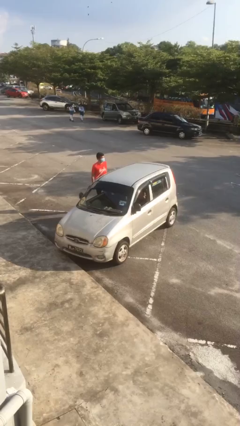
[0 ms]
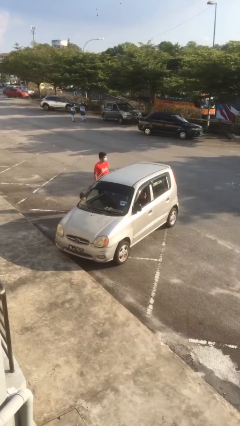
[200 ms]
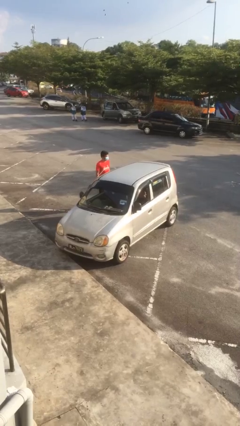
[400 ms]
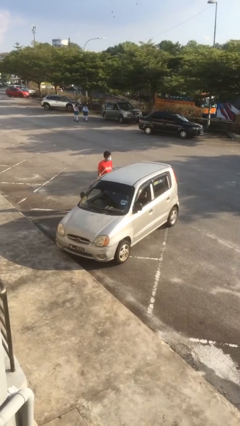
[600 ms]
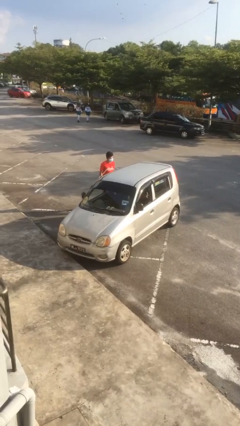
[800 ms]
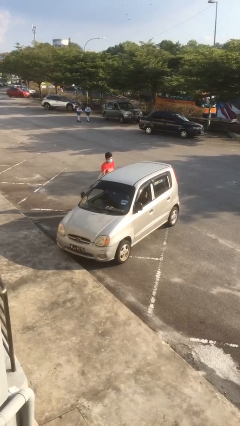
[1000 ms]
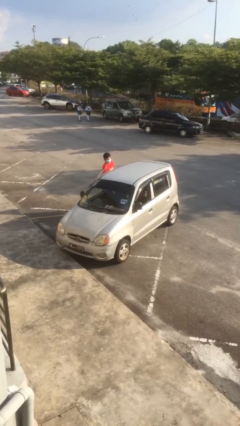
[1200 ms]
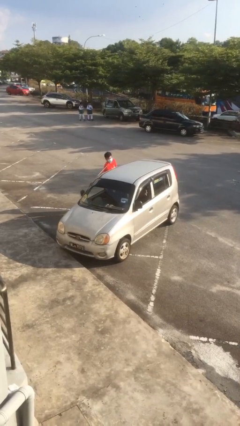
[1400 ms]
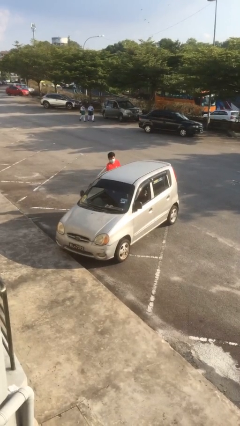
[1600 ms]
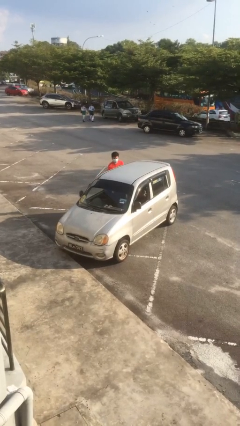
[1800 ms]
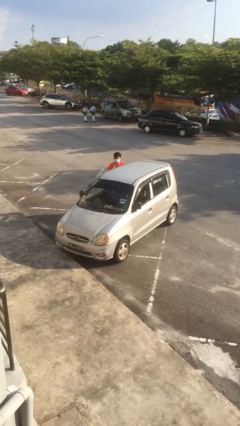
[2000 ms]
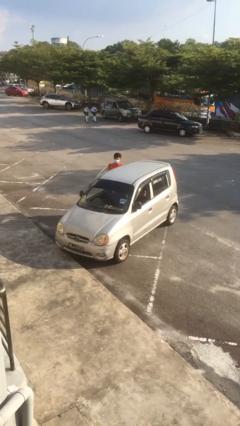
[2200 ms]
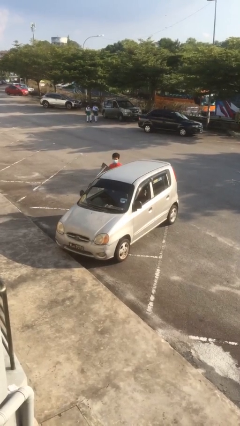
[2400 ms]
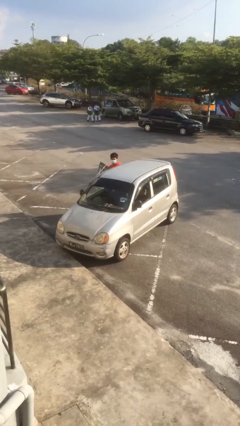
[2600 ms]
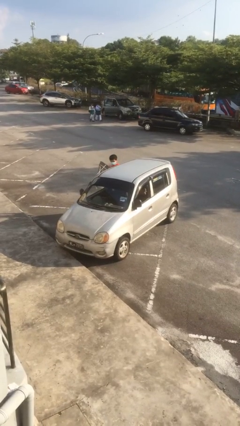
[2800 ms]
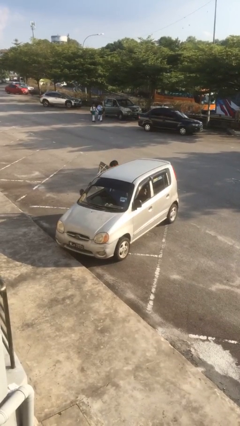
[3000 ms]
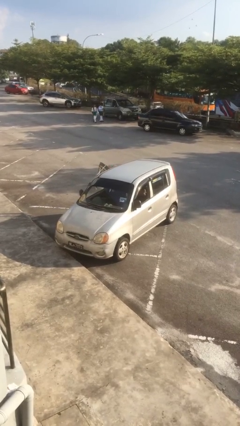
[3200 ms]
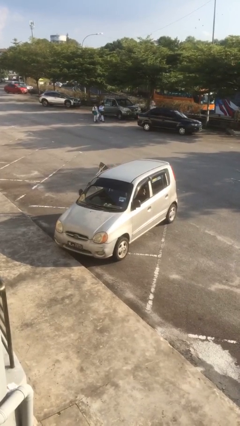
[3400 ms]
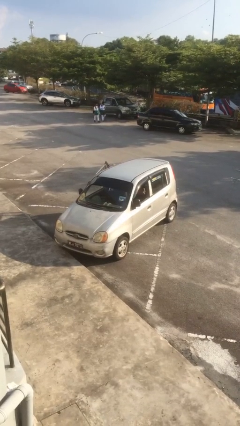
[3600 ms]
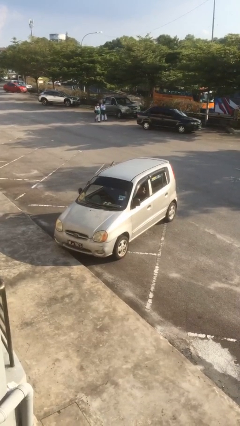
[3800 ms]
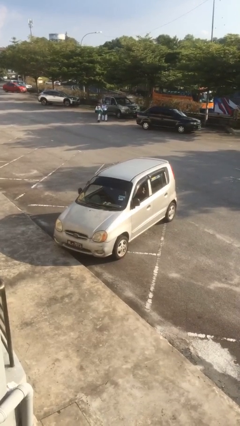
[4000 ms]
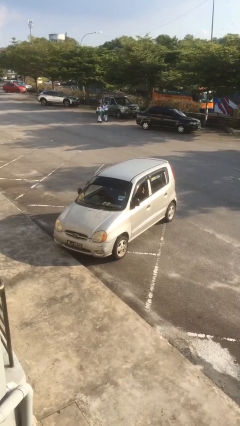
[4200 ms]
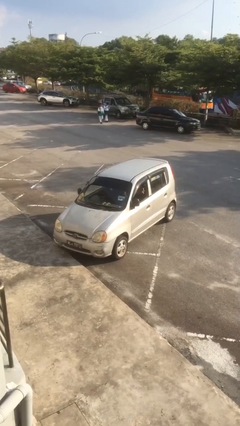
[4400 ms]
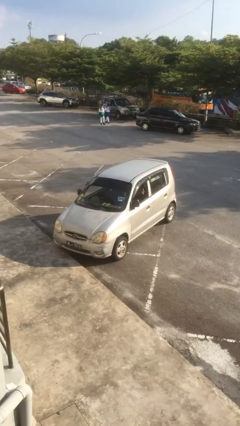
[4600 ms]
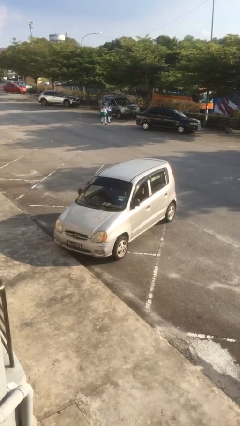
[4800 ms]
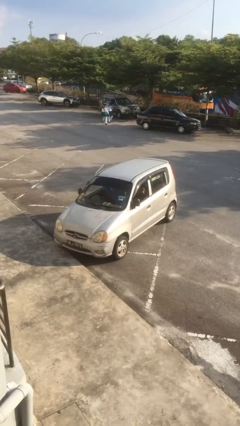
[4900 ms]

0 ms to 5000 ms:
car picks up person

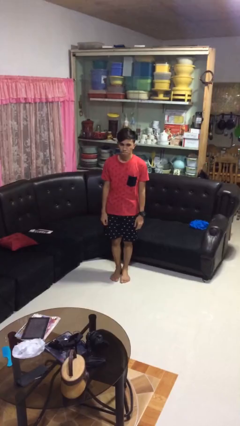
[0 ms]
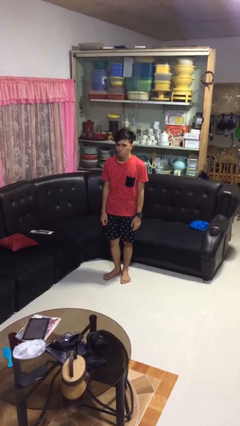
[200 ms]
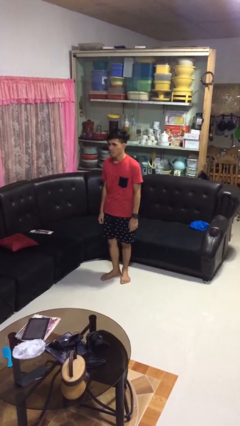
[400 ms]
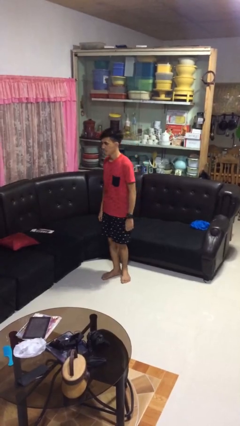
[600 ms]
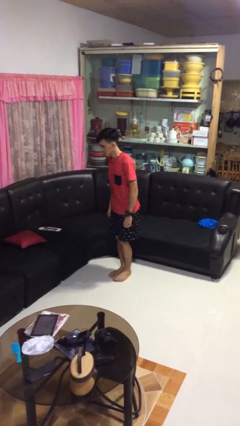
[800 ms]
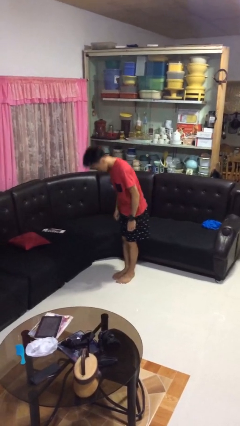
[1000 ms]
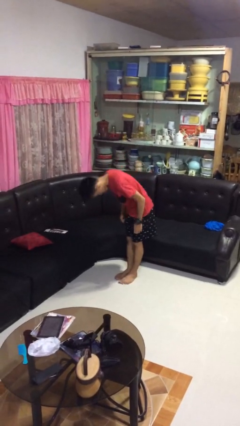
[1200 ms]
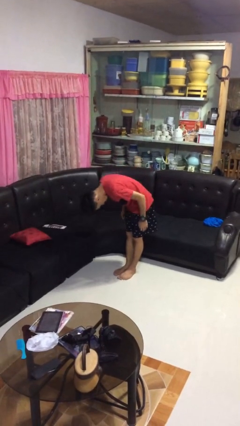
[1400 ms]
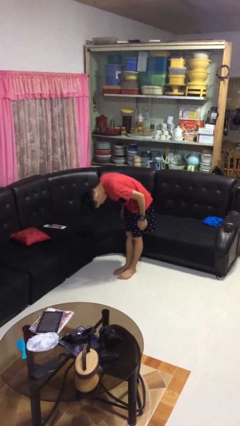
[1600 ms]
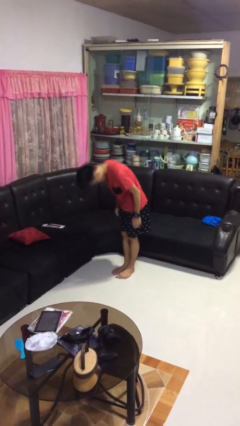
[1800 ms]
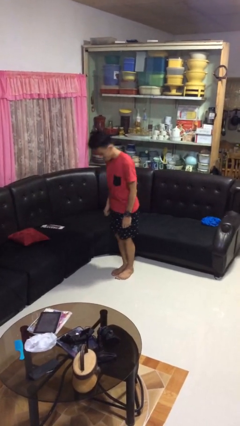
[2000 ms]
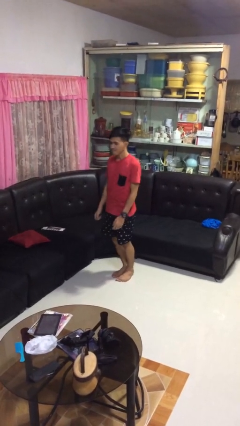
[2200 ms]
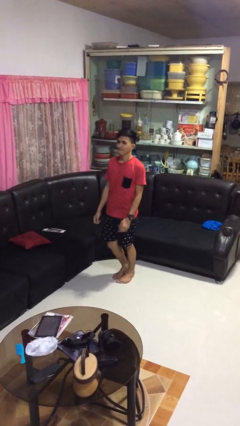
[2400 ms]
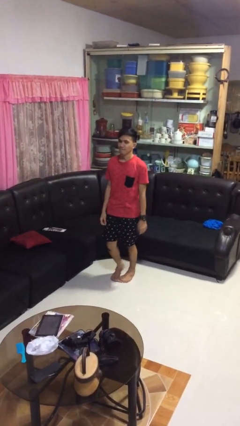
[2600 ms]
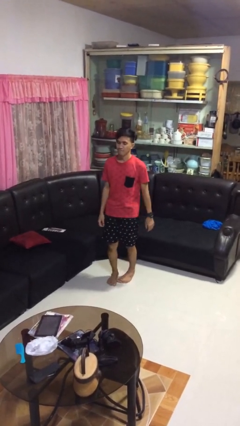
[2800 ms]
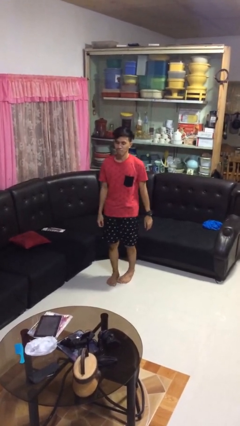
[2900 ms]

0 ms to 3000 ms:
person bows

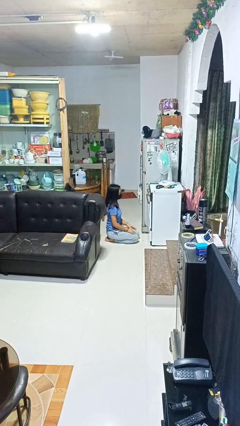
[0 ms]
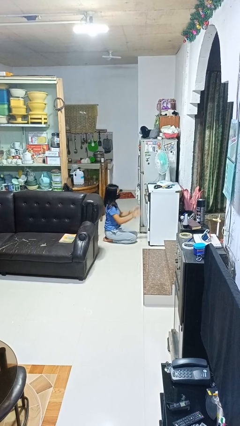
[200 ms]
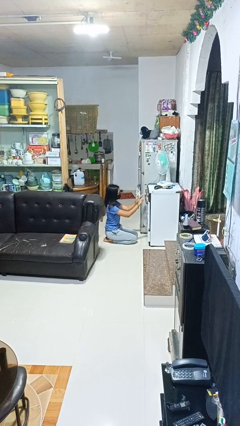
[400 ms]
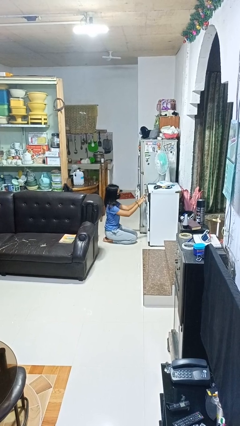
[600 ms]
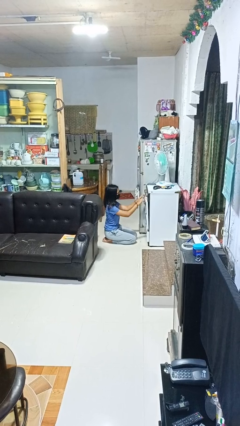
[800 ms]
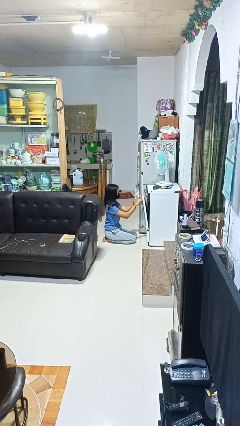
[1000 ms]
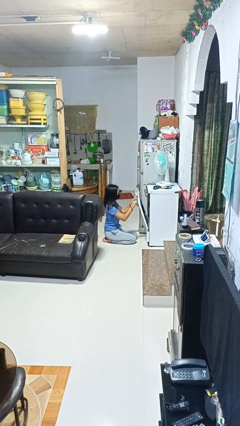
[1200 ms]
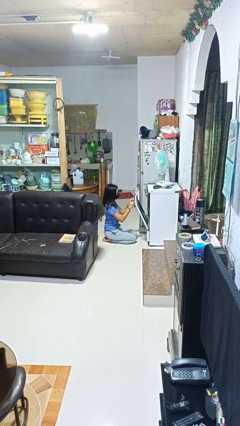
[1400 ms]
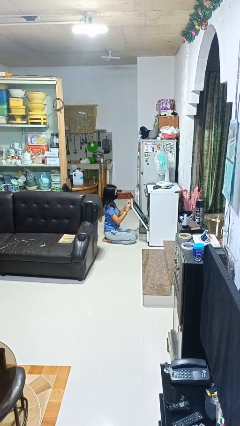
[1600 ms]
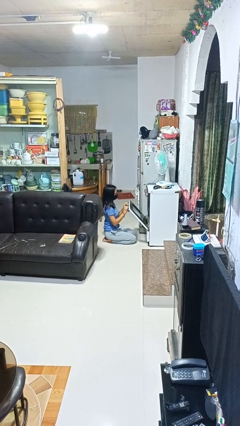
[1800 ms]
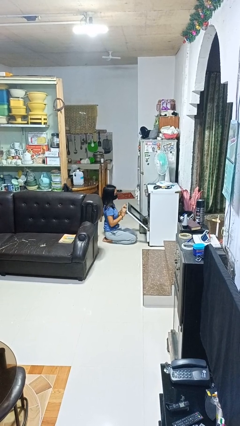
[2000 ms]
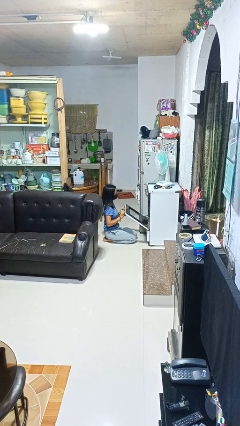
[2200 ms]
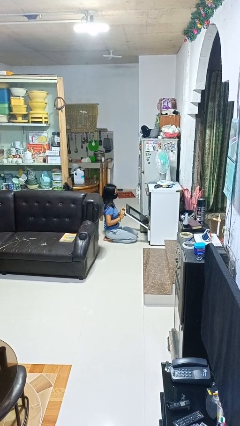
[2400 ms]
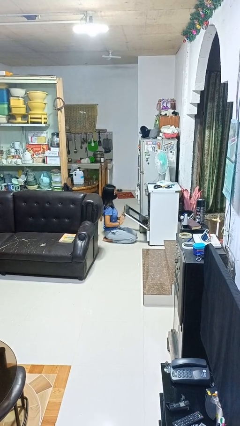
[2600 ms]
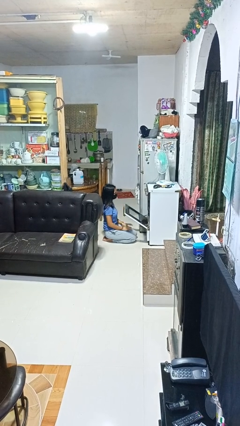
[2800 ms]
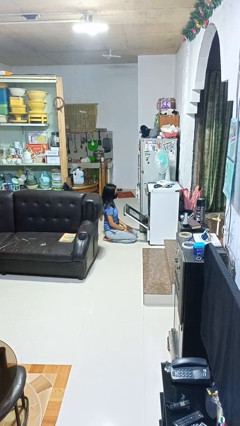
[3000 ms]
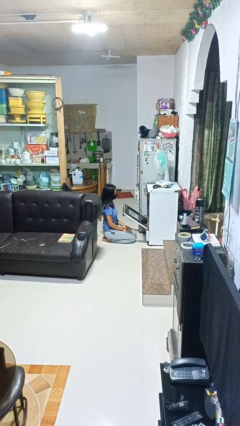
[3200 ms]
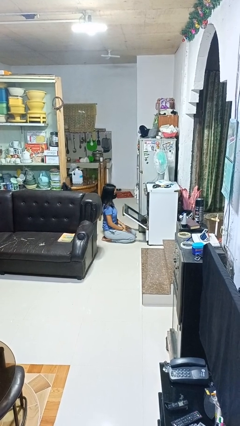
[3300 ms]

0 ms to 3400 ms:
person opens oven door

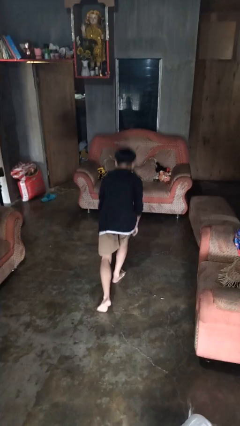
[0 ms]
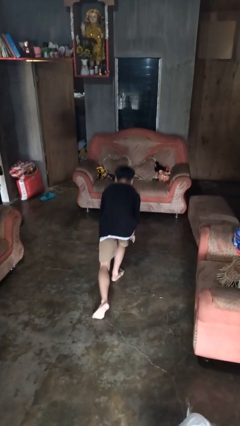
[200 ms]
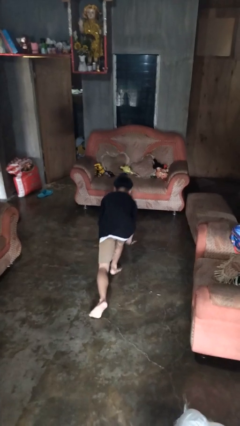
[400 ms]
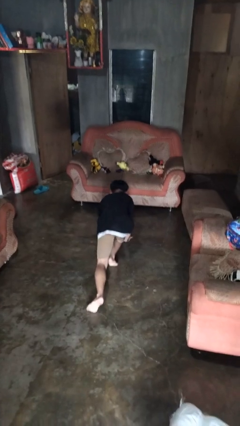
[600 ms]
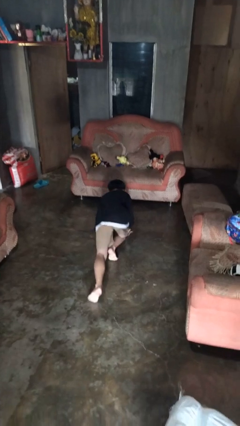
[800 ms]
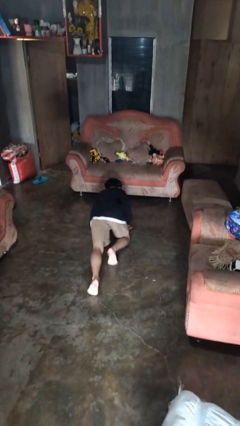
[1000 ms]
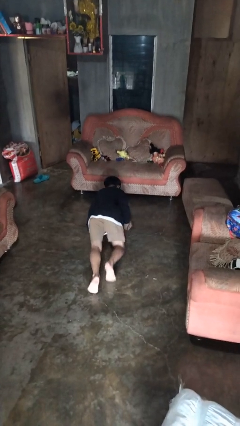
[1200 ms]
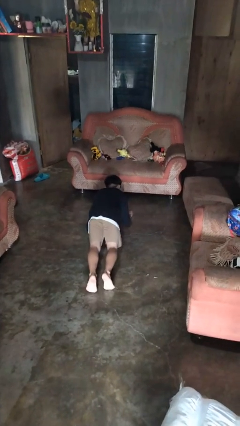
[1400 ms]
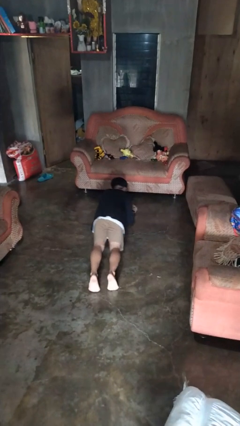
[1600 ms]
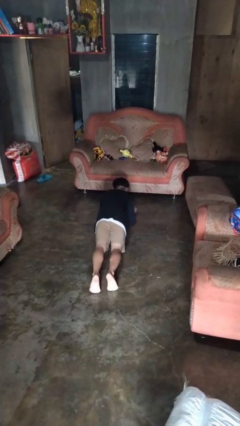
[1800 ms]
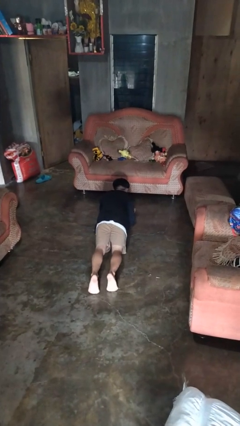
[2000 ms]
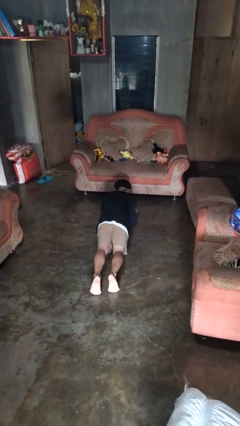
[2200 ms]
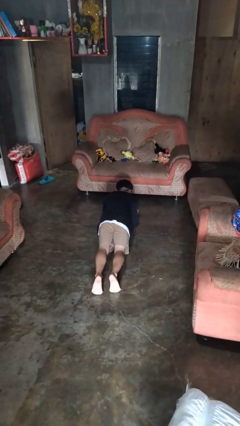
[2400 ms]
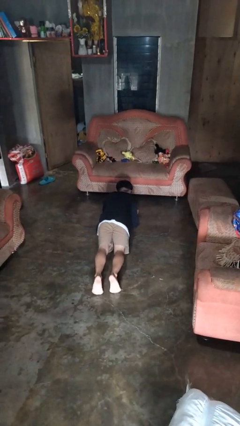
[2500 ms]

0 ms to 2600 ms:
person exercises with plank

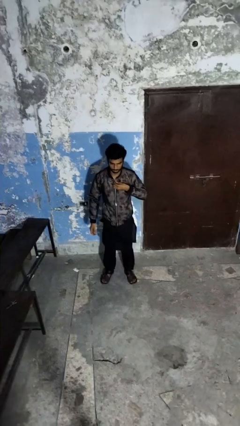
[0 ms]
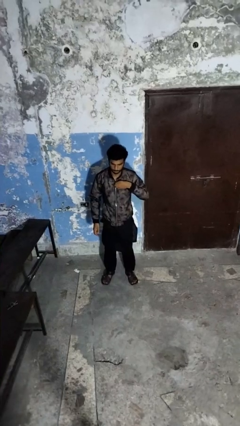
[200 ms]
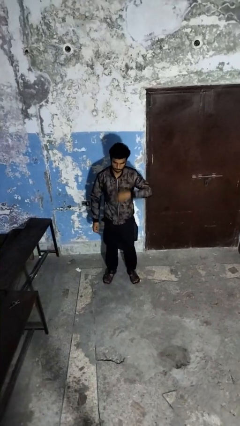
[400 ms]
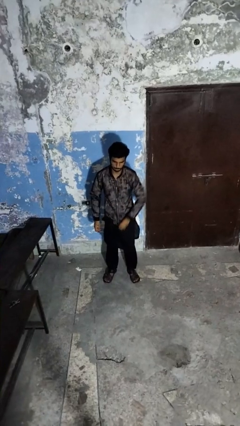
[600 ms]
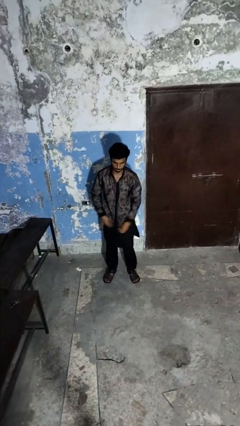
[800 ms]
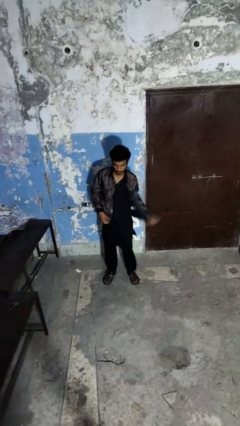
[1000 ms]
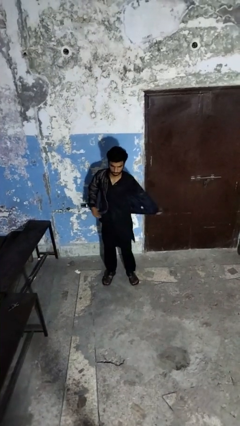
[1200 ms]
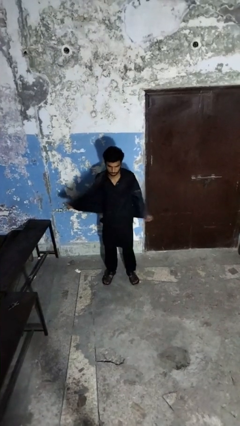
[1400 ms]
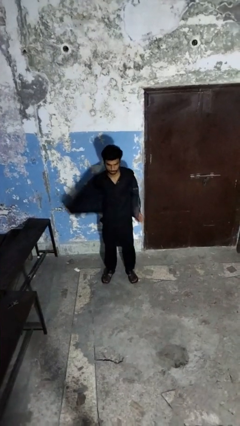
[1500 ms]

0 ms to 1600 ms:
person unzips jacket

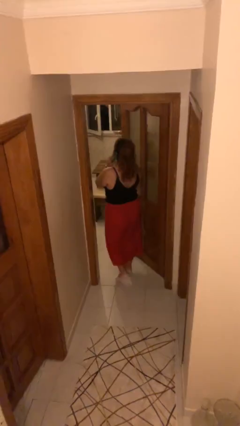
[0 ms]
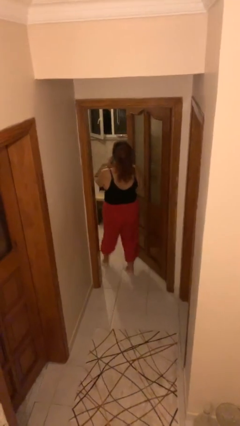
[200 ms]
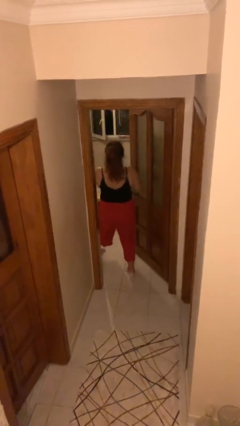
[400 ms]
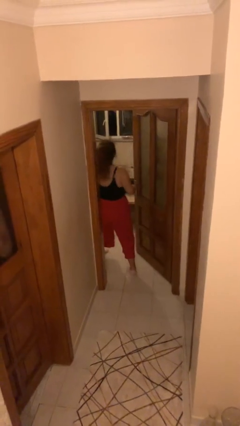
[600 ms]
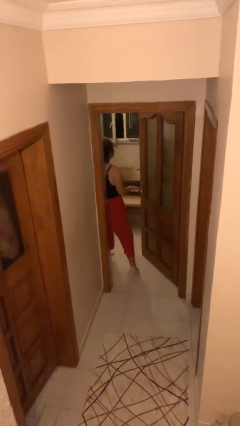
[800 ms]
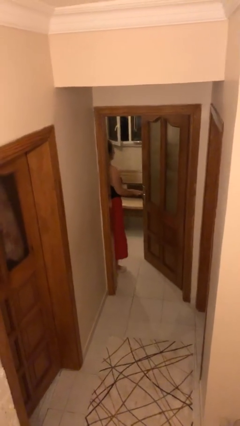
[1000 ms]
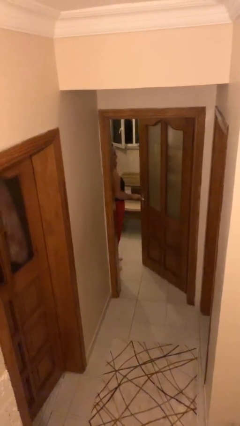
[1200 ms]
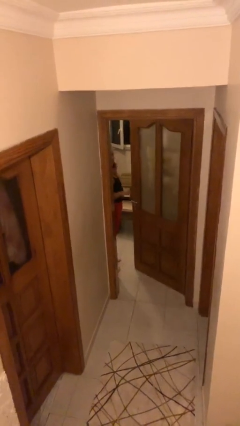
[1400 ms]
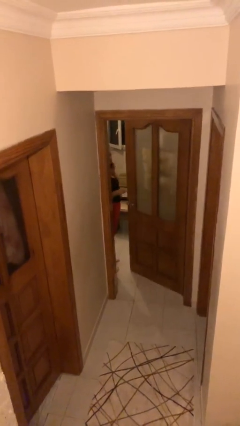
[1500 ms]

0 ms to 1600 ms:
person exits scene through structure

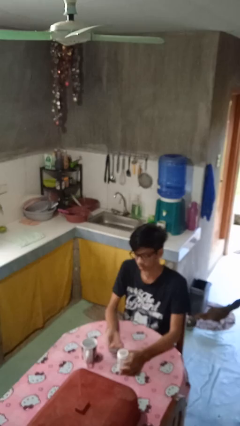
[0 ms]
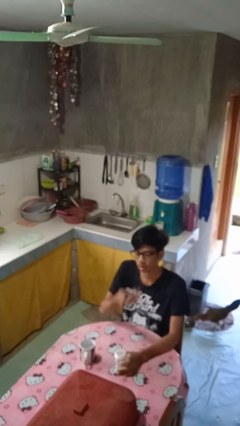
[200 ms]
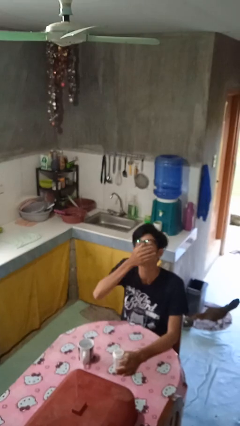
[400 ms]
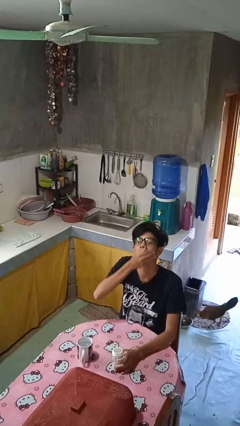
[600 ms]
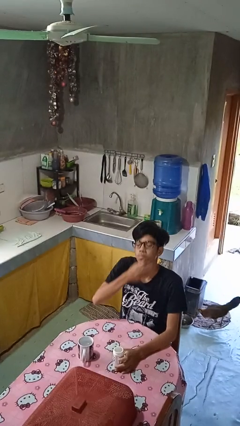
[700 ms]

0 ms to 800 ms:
person takes medicine pills
